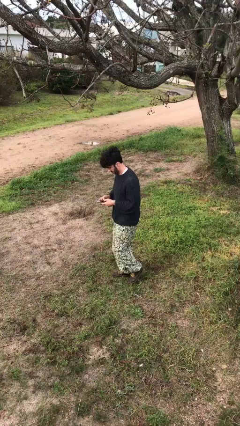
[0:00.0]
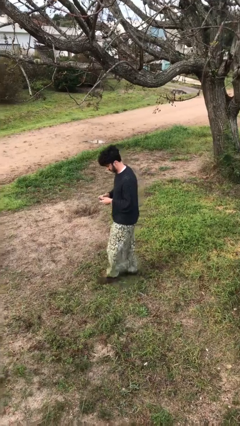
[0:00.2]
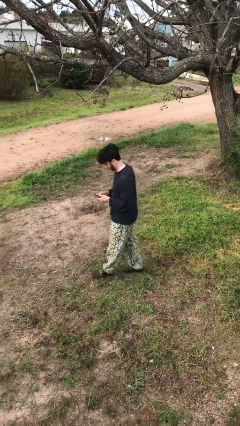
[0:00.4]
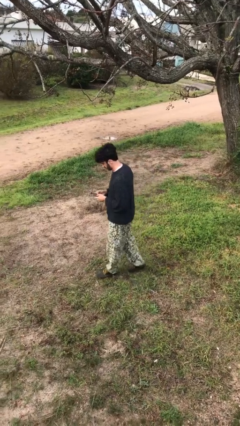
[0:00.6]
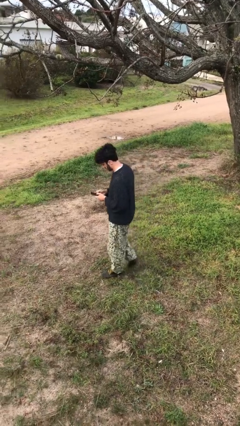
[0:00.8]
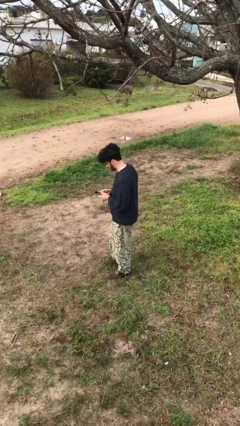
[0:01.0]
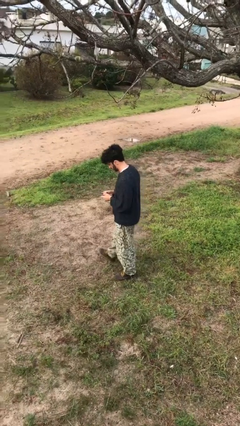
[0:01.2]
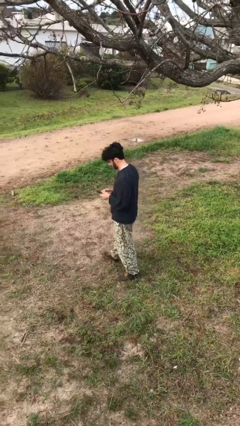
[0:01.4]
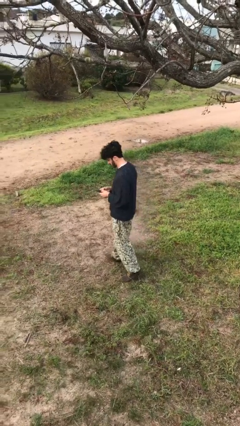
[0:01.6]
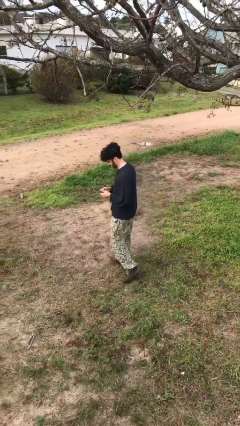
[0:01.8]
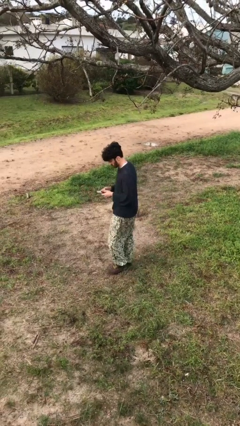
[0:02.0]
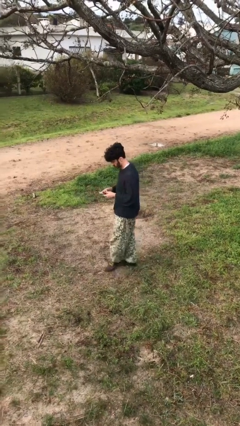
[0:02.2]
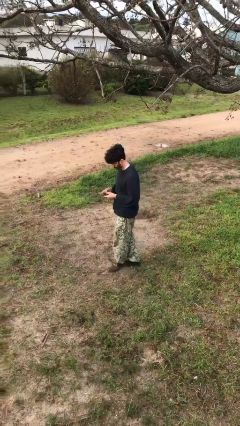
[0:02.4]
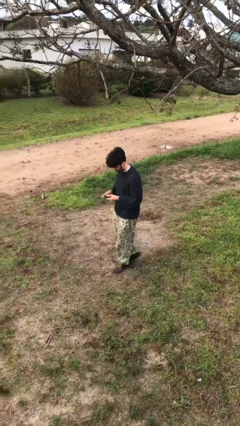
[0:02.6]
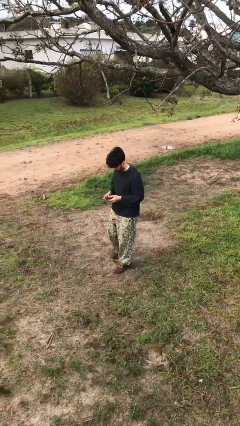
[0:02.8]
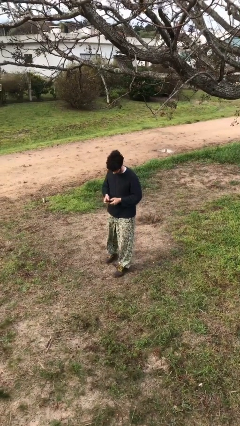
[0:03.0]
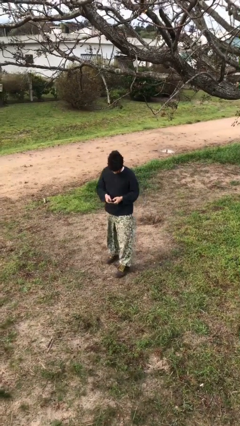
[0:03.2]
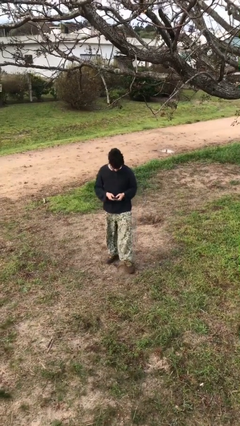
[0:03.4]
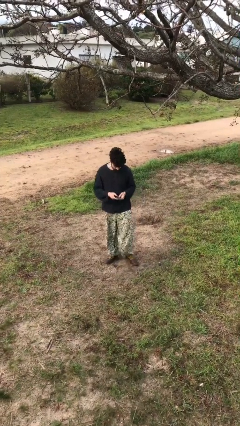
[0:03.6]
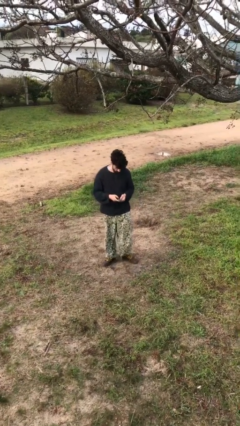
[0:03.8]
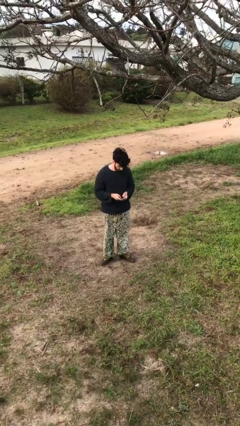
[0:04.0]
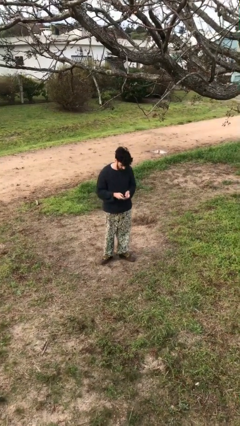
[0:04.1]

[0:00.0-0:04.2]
person texts on phone

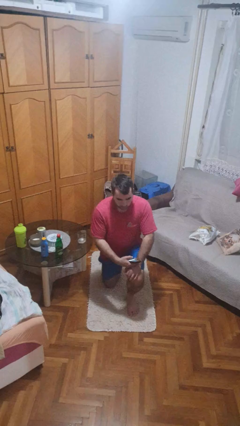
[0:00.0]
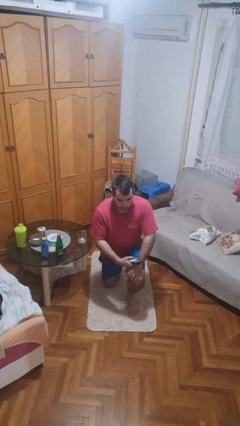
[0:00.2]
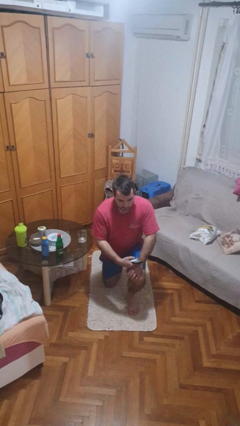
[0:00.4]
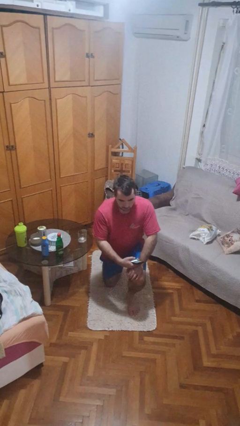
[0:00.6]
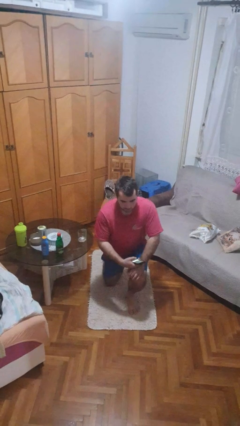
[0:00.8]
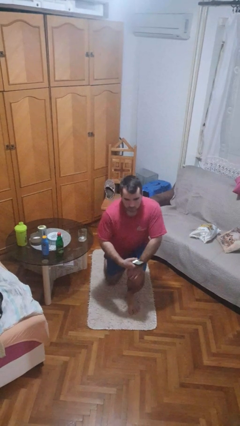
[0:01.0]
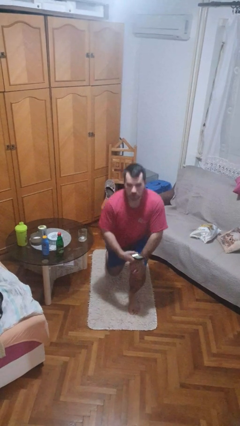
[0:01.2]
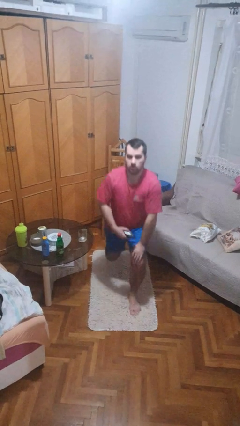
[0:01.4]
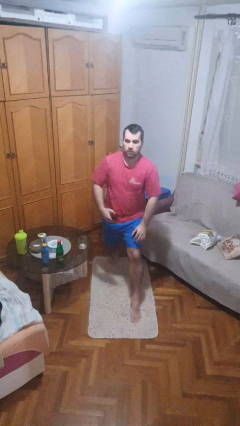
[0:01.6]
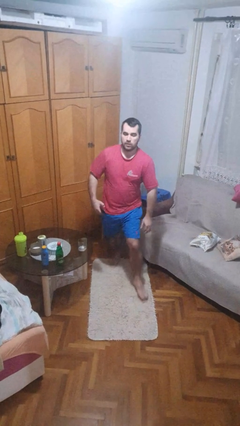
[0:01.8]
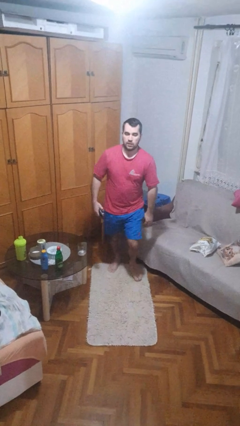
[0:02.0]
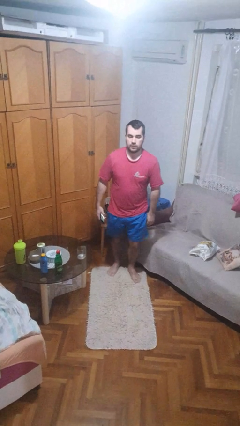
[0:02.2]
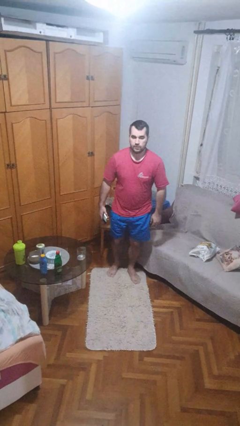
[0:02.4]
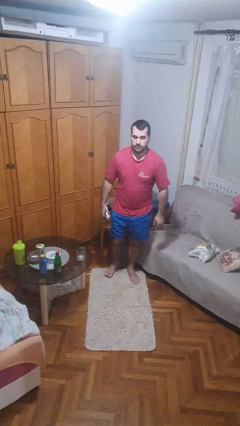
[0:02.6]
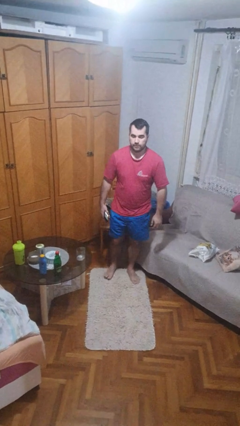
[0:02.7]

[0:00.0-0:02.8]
person stands up from floor

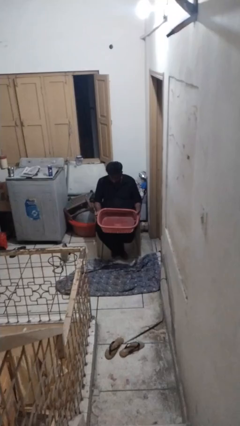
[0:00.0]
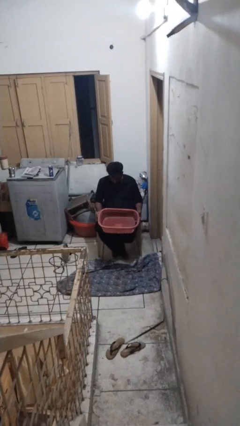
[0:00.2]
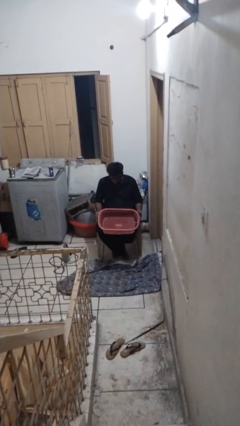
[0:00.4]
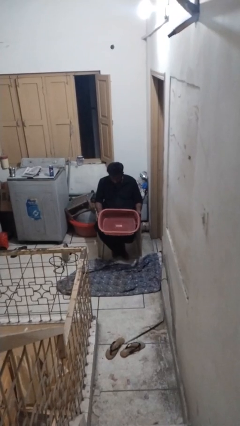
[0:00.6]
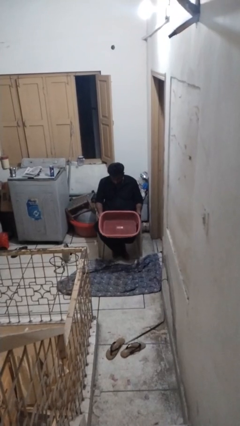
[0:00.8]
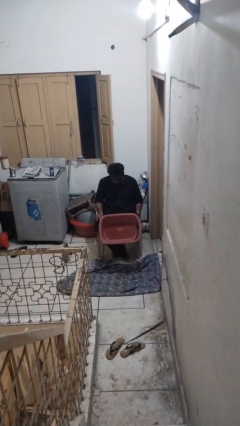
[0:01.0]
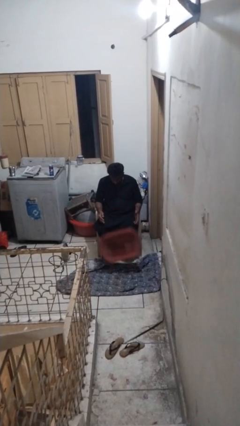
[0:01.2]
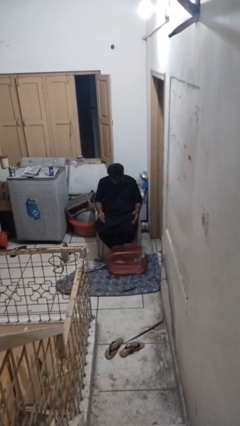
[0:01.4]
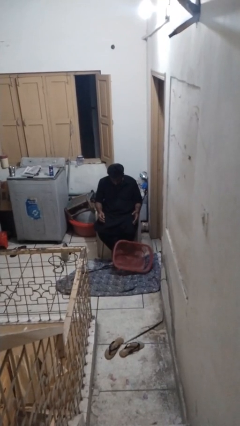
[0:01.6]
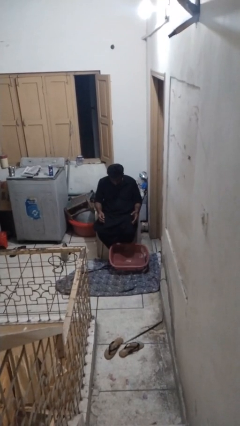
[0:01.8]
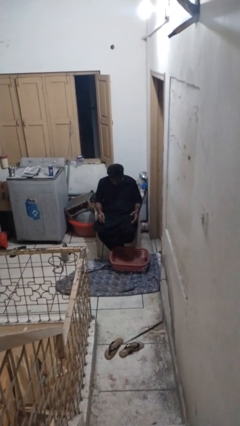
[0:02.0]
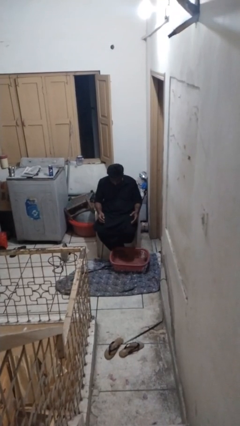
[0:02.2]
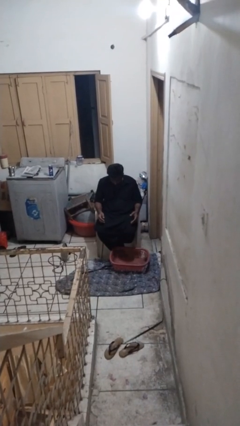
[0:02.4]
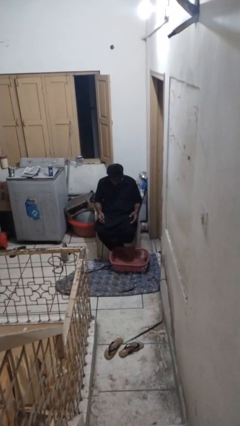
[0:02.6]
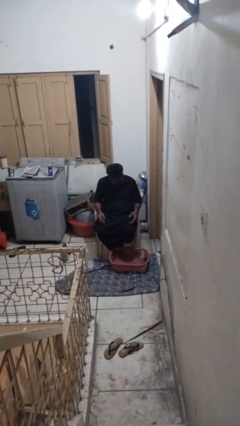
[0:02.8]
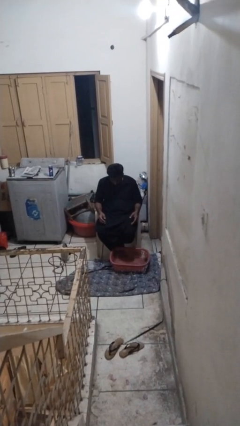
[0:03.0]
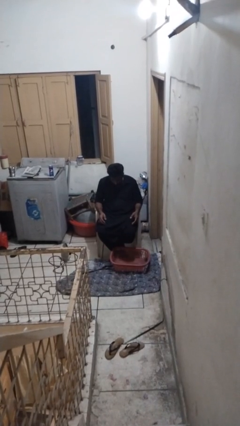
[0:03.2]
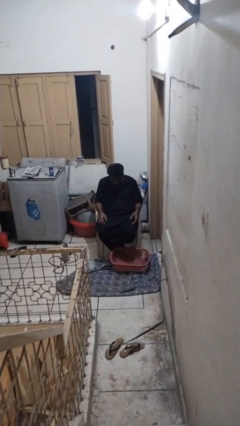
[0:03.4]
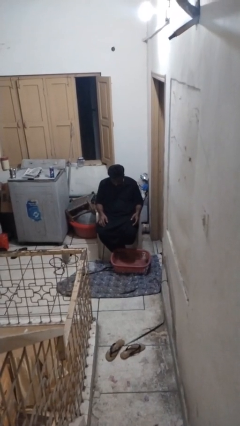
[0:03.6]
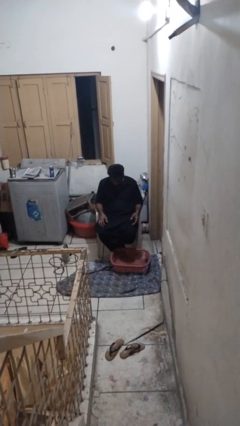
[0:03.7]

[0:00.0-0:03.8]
person drops object

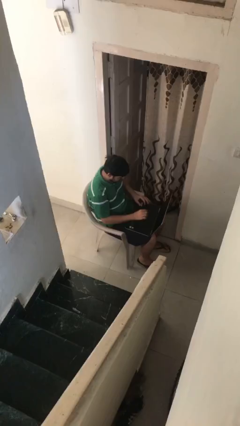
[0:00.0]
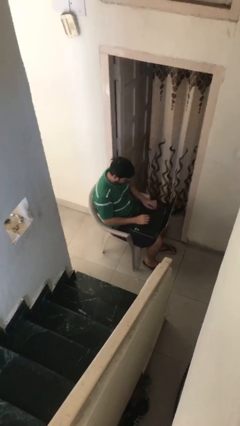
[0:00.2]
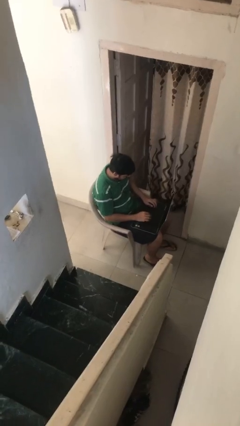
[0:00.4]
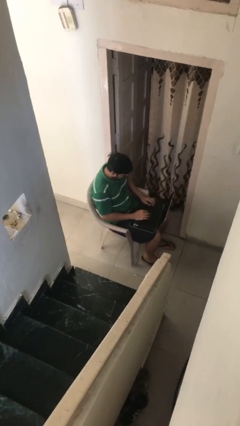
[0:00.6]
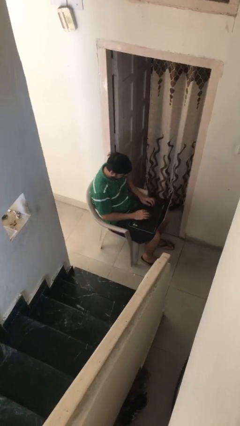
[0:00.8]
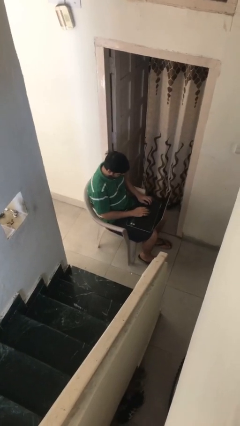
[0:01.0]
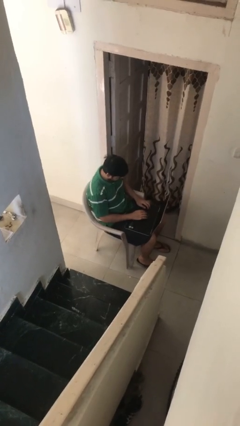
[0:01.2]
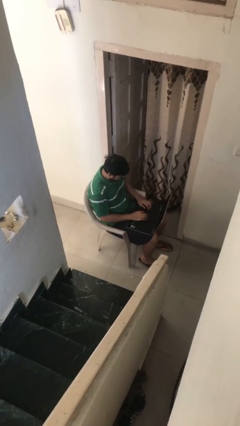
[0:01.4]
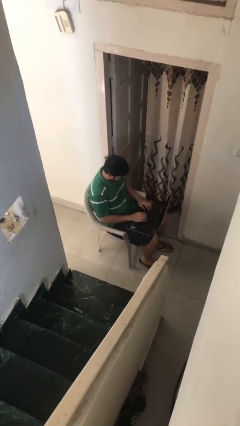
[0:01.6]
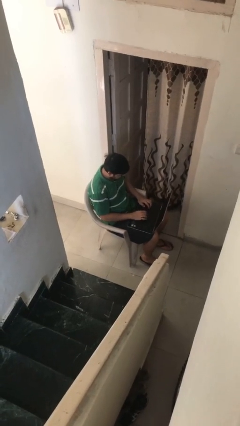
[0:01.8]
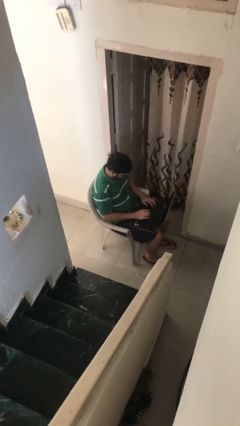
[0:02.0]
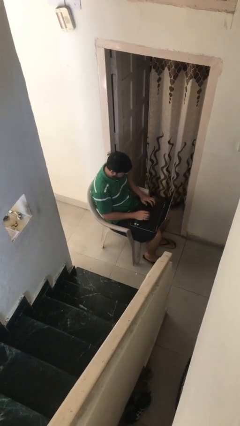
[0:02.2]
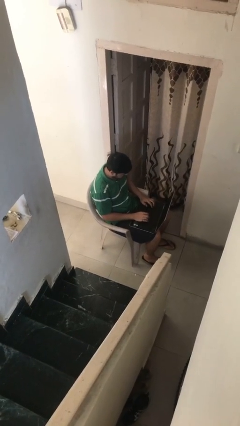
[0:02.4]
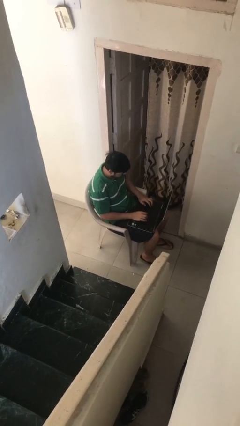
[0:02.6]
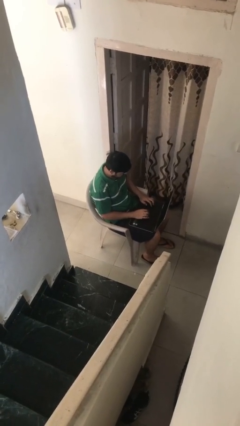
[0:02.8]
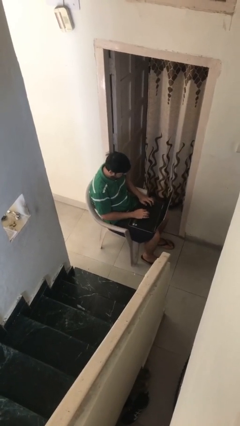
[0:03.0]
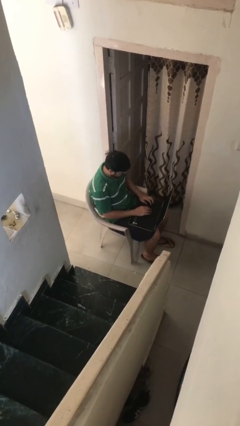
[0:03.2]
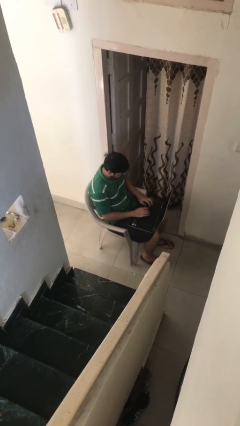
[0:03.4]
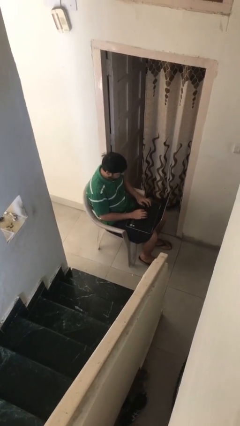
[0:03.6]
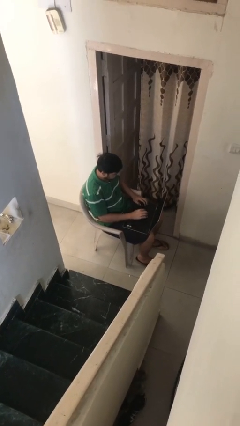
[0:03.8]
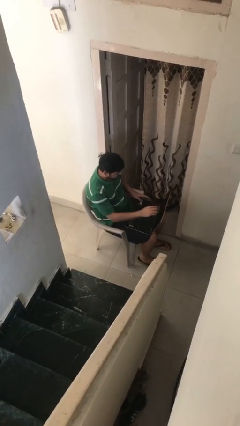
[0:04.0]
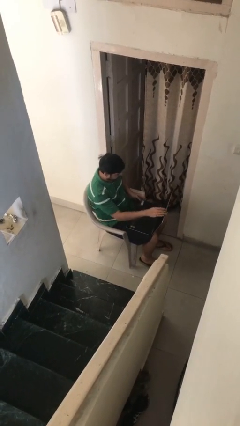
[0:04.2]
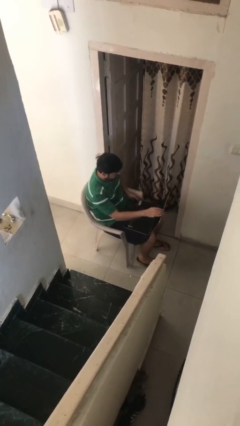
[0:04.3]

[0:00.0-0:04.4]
person interacts with laptop

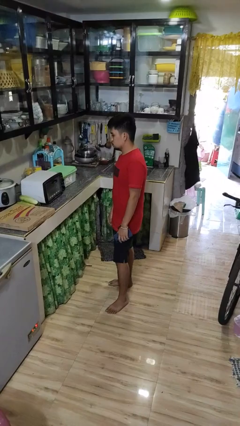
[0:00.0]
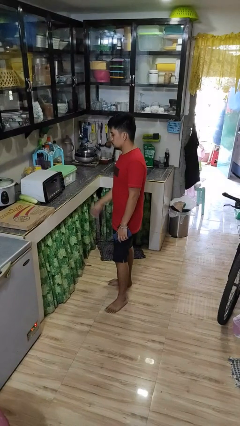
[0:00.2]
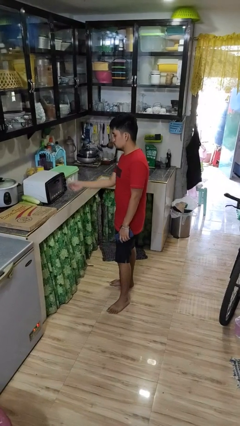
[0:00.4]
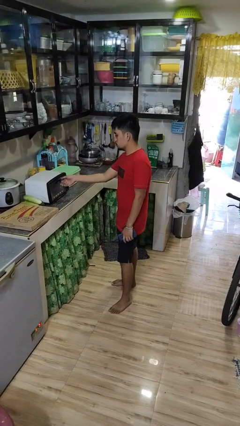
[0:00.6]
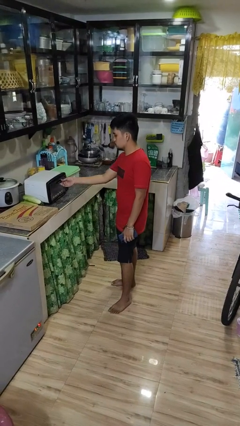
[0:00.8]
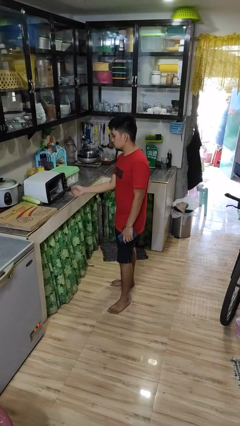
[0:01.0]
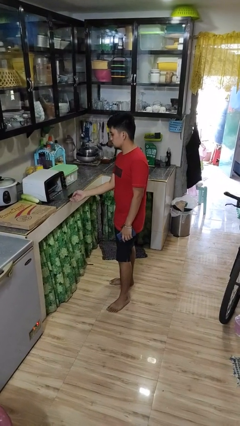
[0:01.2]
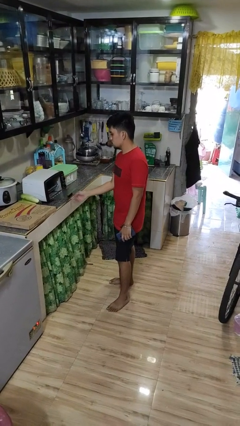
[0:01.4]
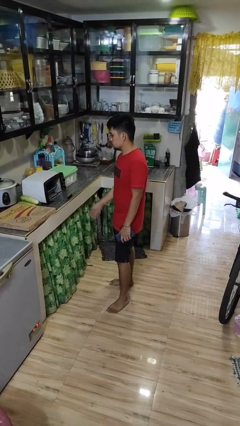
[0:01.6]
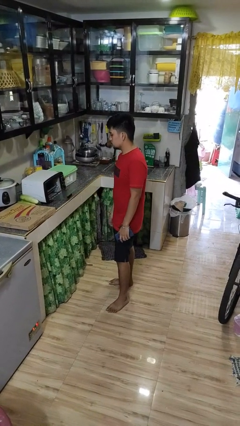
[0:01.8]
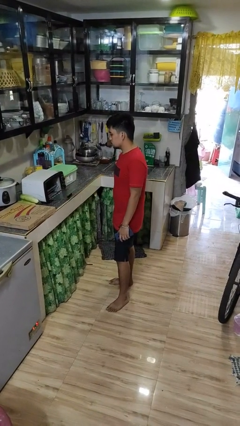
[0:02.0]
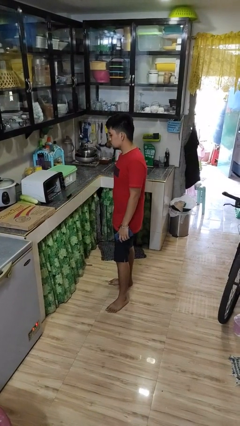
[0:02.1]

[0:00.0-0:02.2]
person opens microwave
